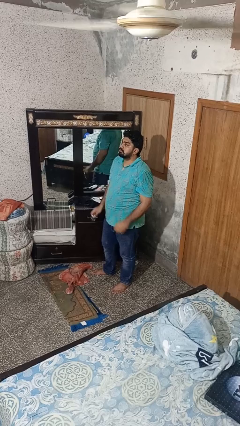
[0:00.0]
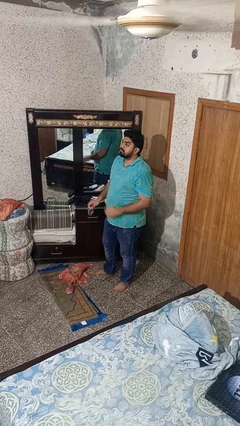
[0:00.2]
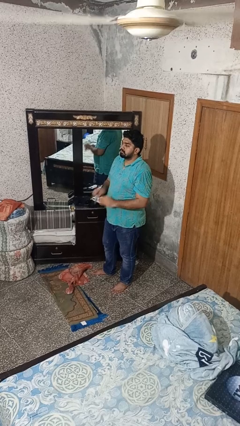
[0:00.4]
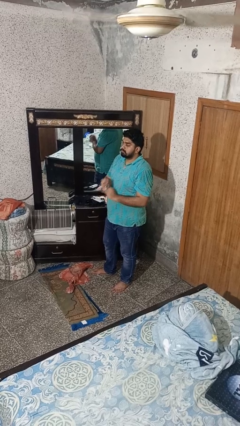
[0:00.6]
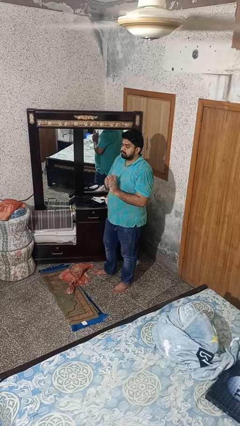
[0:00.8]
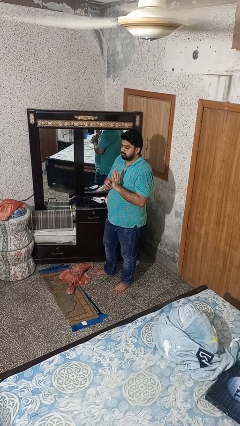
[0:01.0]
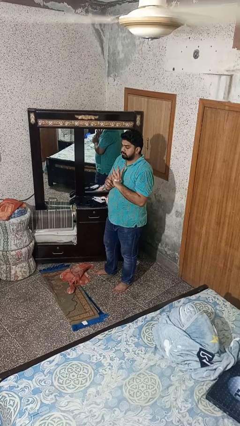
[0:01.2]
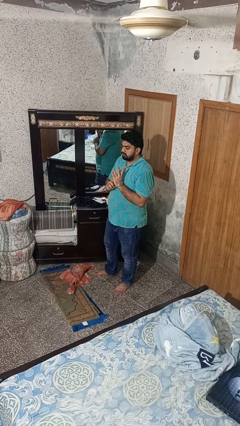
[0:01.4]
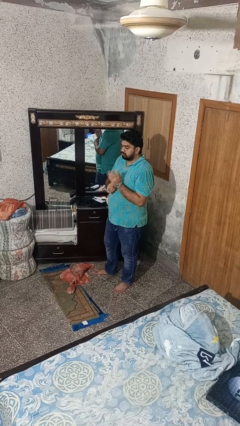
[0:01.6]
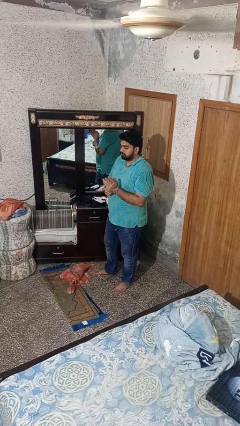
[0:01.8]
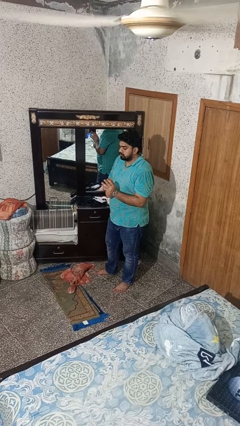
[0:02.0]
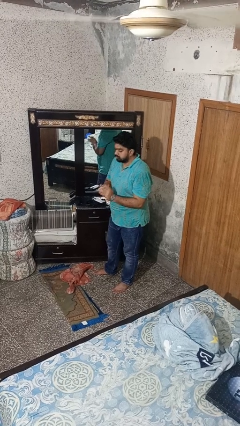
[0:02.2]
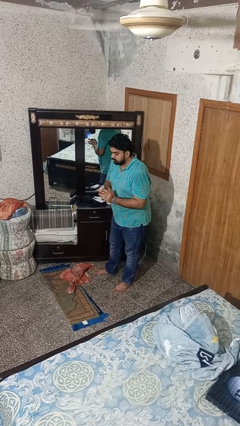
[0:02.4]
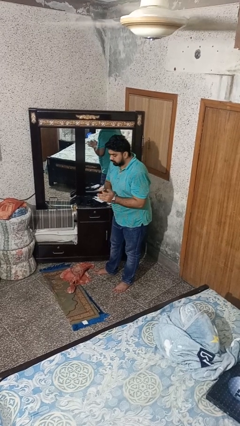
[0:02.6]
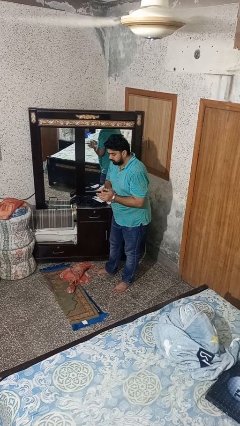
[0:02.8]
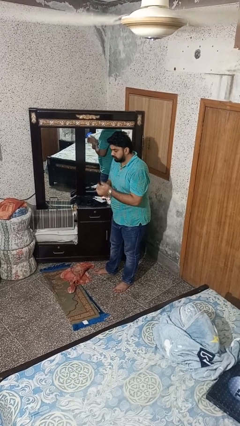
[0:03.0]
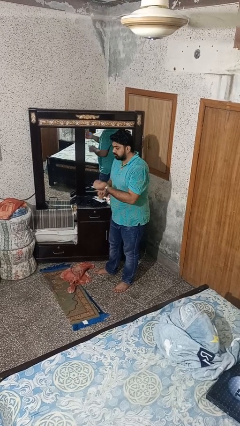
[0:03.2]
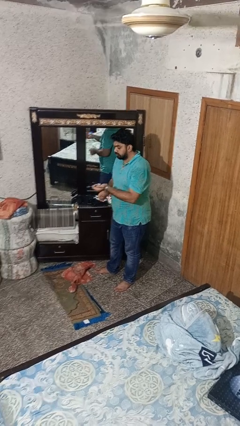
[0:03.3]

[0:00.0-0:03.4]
person puts on wristwatch

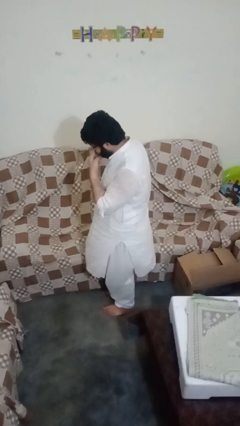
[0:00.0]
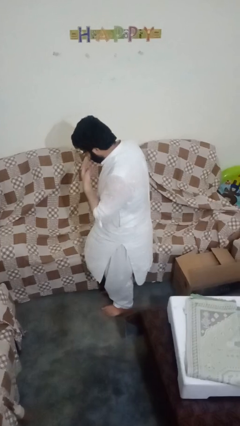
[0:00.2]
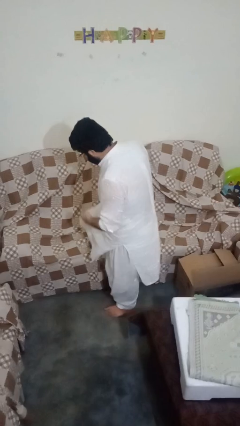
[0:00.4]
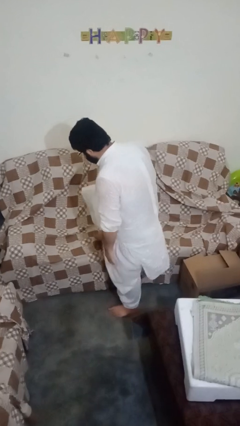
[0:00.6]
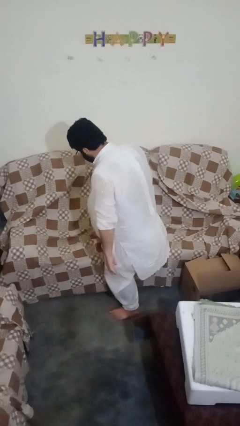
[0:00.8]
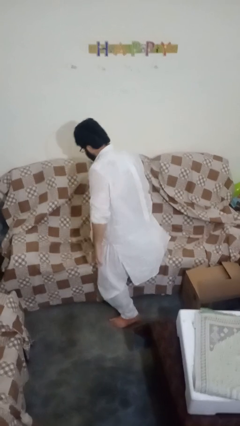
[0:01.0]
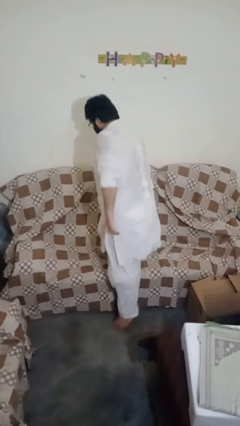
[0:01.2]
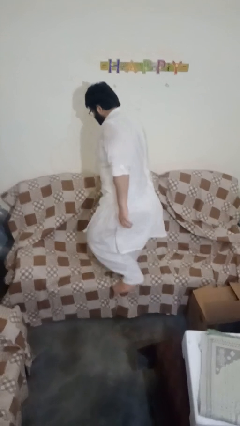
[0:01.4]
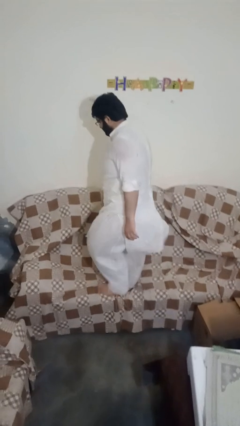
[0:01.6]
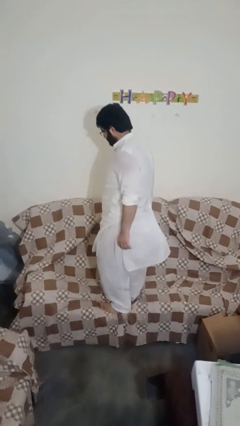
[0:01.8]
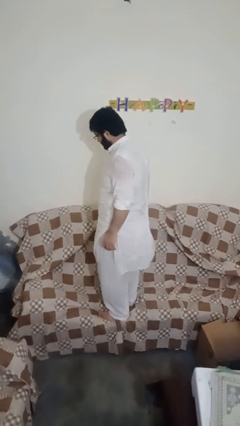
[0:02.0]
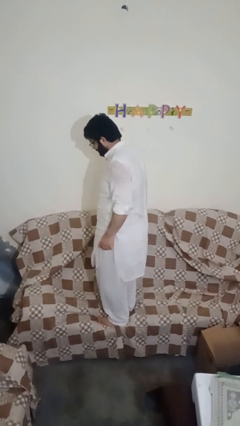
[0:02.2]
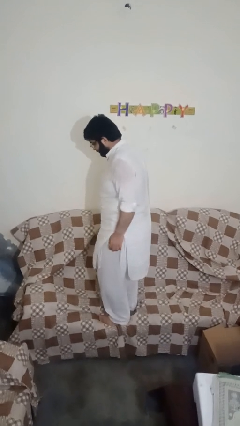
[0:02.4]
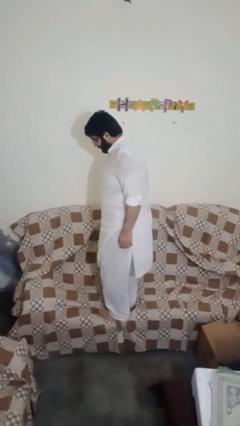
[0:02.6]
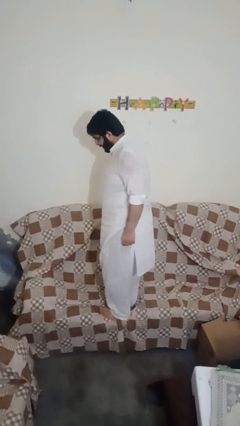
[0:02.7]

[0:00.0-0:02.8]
person climbs on couch

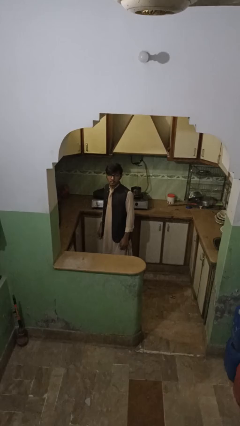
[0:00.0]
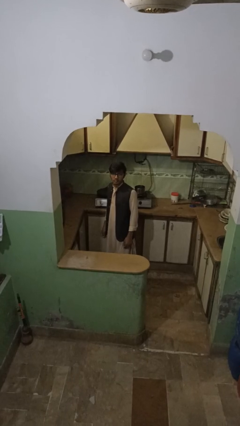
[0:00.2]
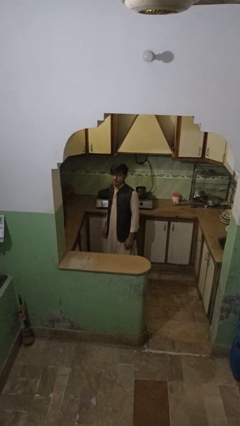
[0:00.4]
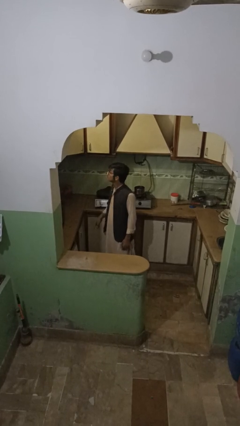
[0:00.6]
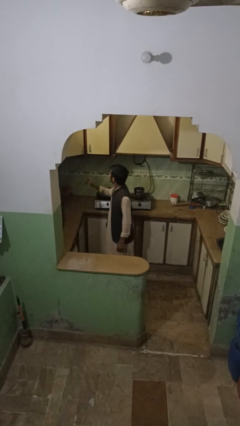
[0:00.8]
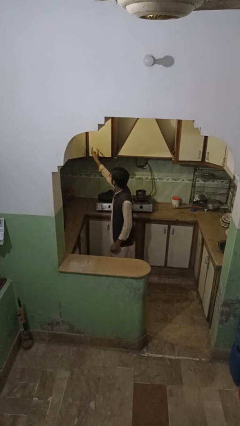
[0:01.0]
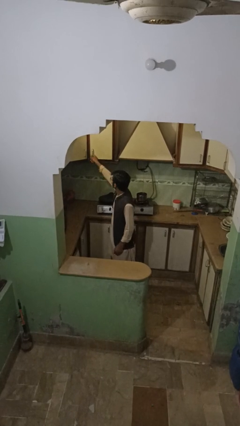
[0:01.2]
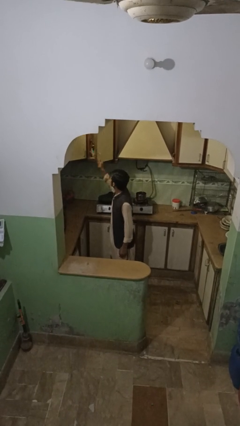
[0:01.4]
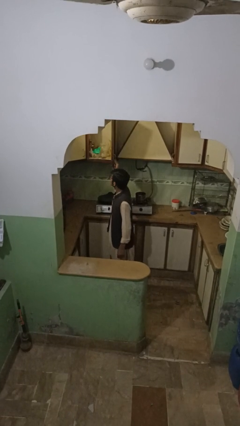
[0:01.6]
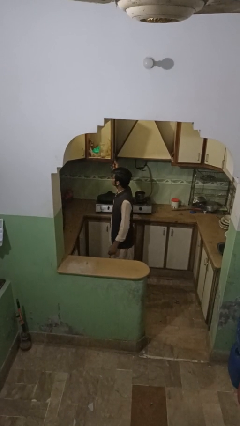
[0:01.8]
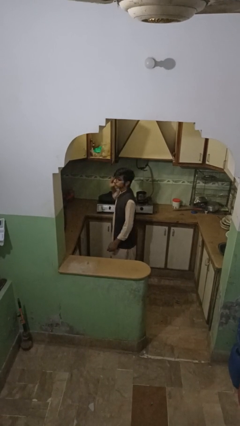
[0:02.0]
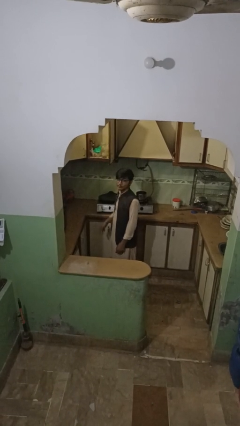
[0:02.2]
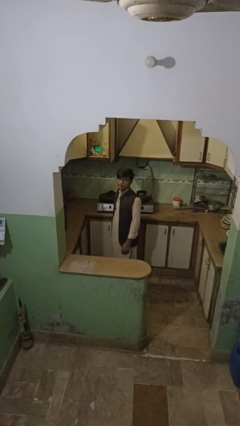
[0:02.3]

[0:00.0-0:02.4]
person opens cabinet

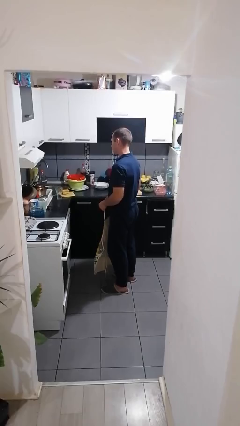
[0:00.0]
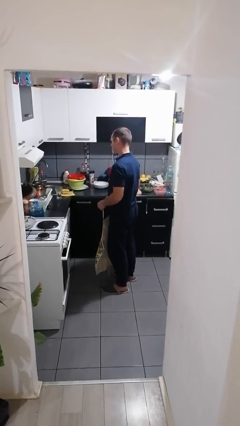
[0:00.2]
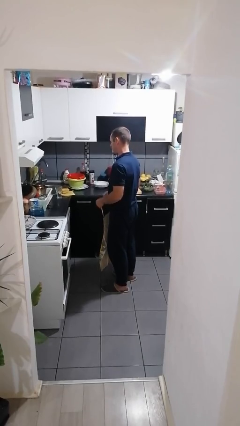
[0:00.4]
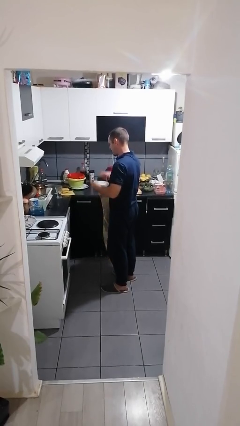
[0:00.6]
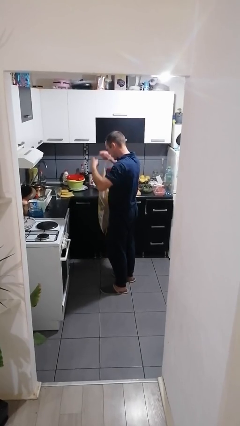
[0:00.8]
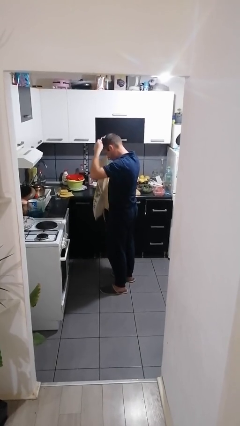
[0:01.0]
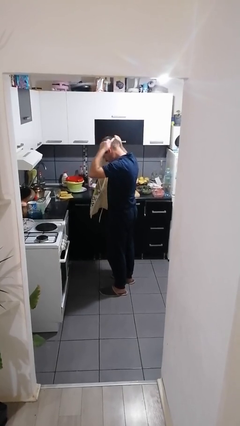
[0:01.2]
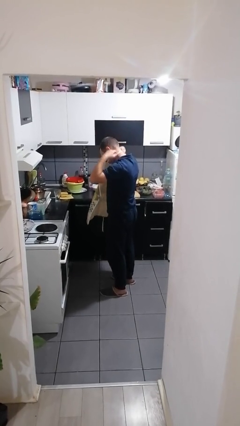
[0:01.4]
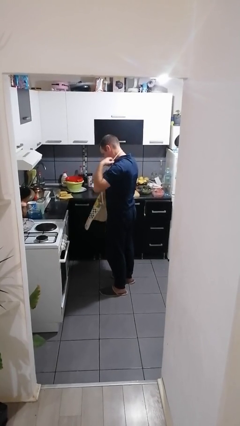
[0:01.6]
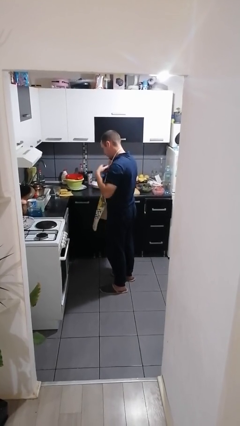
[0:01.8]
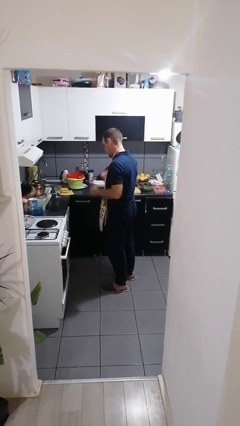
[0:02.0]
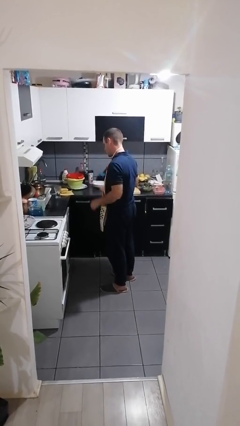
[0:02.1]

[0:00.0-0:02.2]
person puts on apron

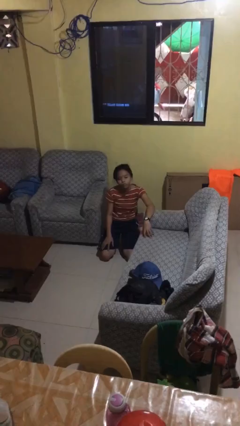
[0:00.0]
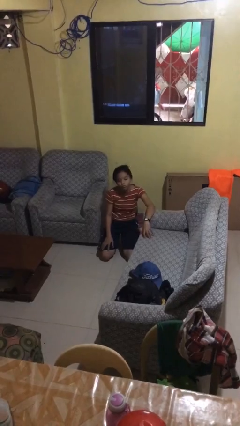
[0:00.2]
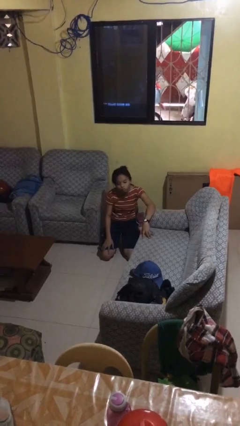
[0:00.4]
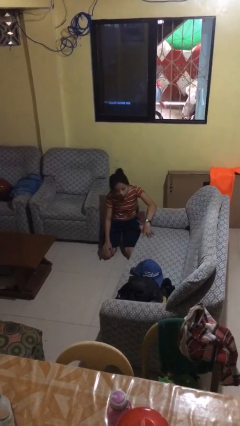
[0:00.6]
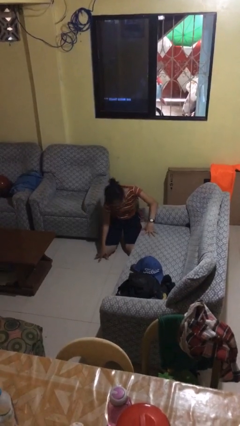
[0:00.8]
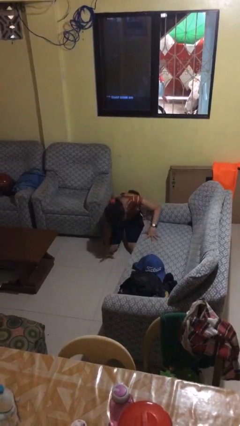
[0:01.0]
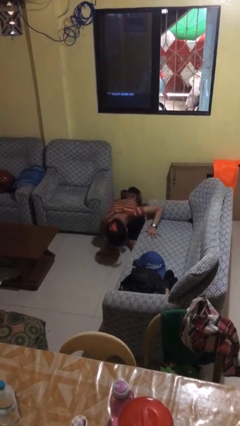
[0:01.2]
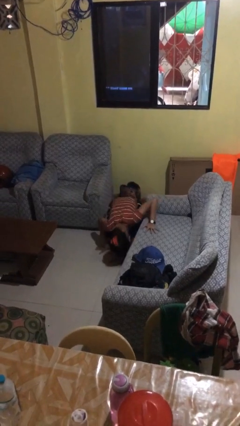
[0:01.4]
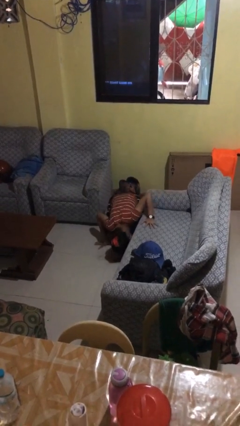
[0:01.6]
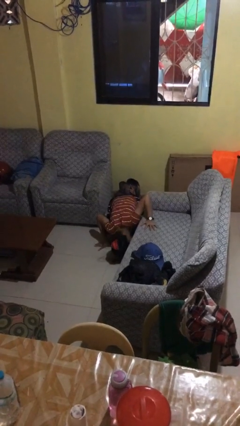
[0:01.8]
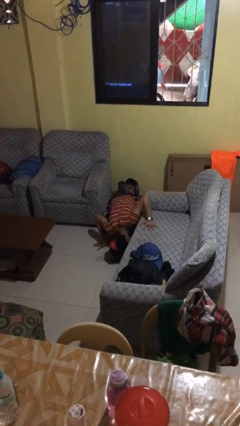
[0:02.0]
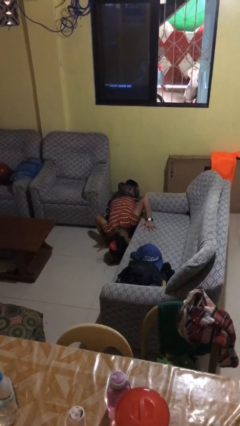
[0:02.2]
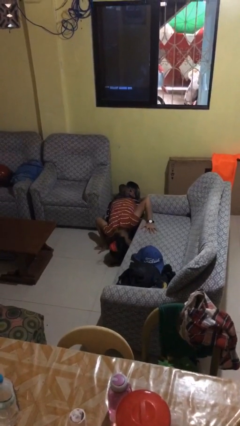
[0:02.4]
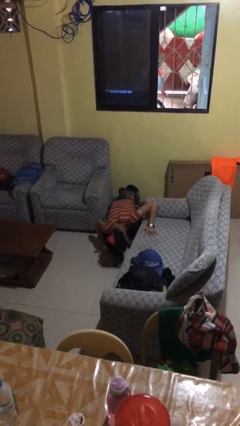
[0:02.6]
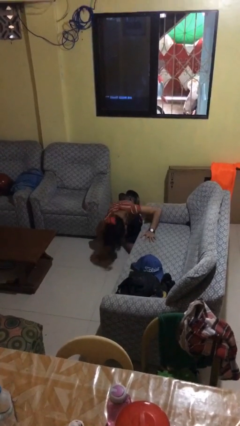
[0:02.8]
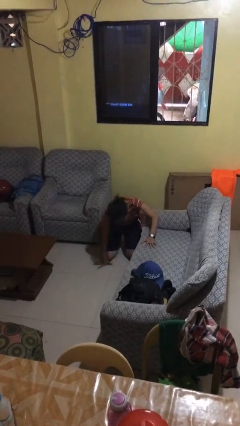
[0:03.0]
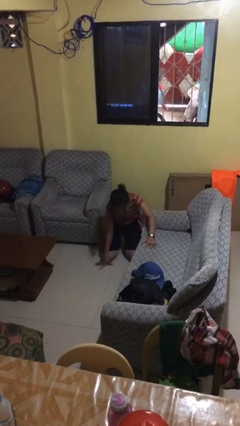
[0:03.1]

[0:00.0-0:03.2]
person searches under couch

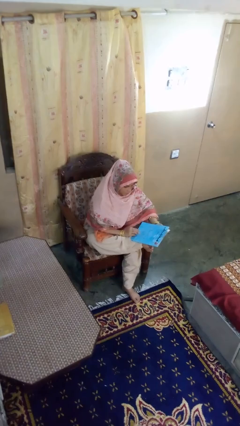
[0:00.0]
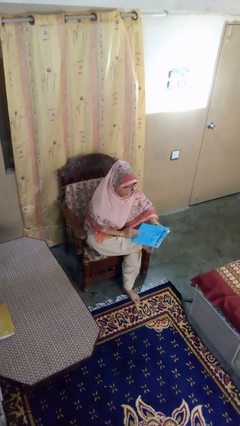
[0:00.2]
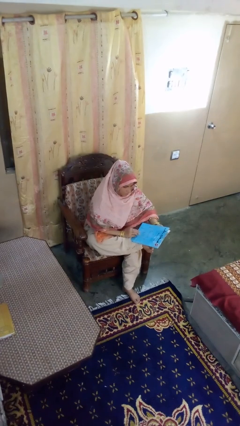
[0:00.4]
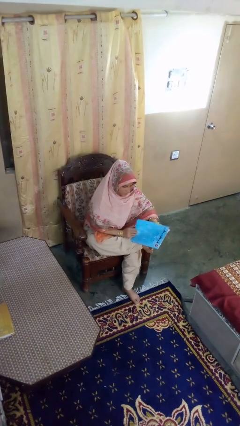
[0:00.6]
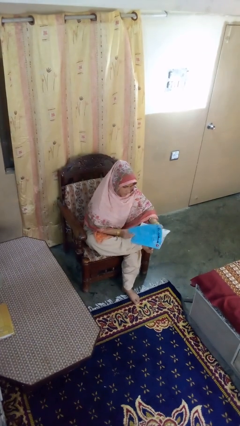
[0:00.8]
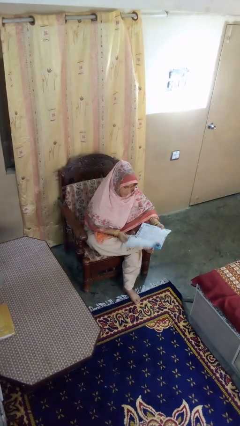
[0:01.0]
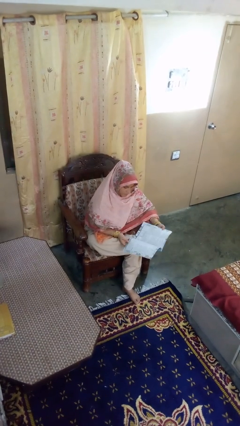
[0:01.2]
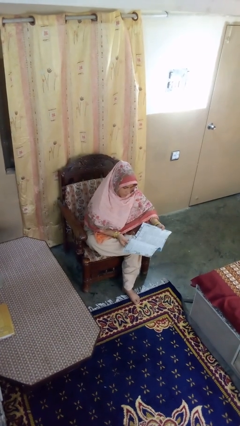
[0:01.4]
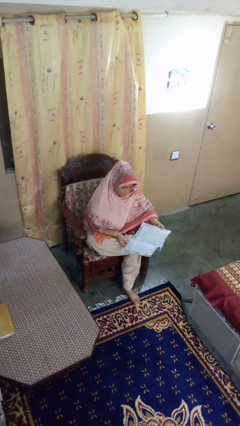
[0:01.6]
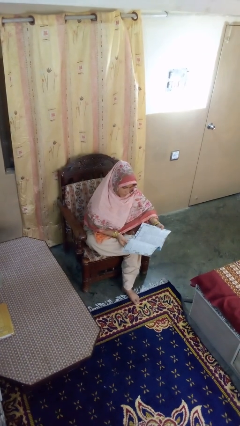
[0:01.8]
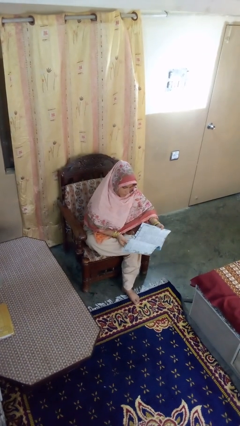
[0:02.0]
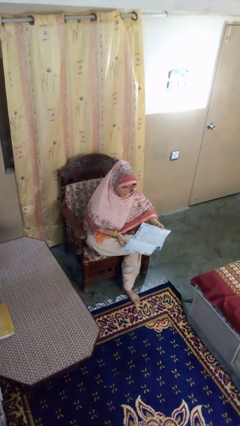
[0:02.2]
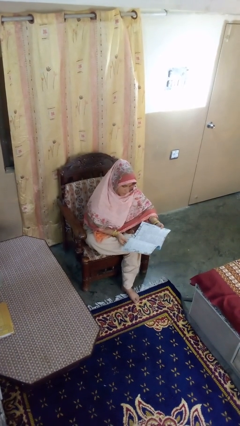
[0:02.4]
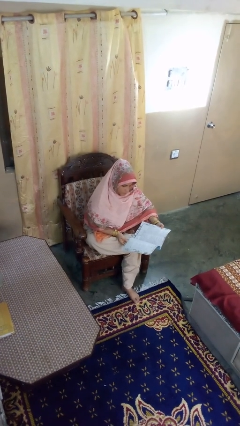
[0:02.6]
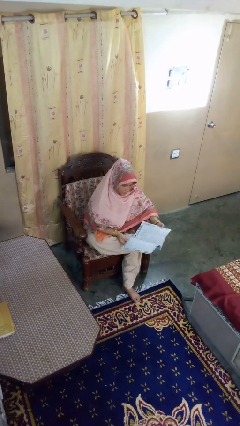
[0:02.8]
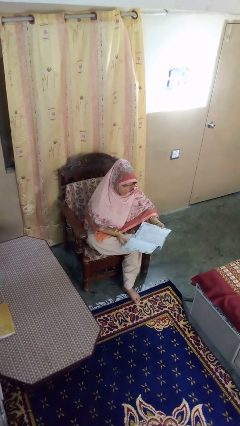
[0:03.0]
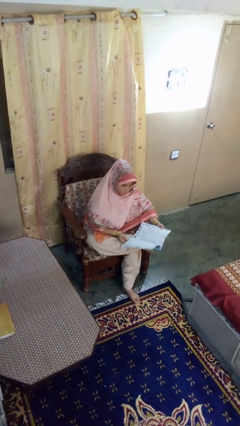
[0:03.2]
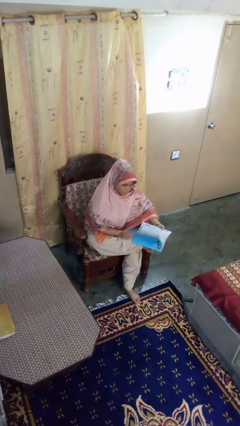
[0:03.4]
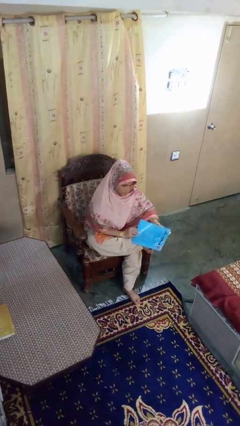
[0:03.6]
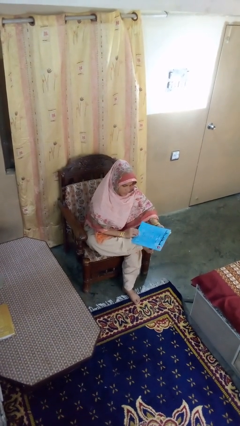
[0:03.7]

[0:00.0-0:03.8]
person reads magazine
